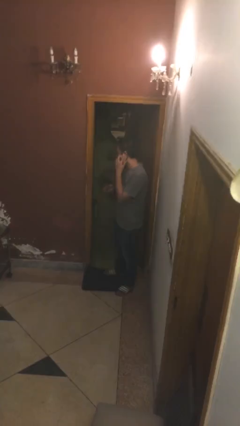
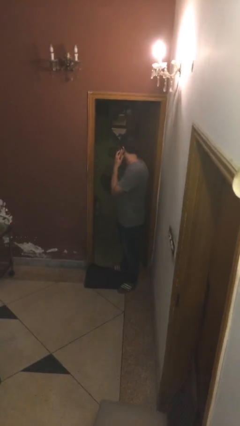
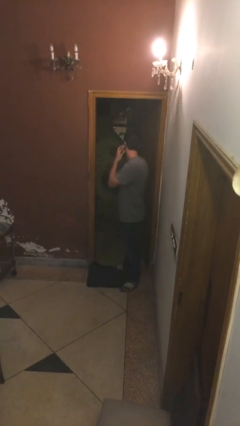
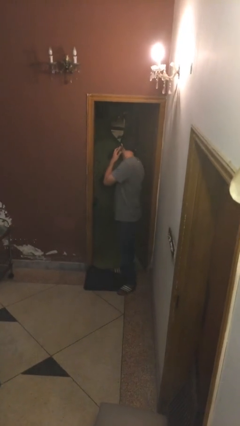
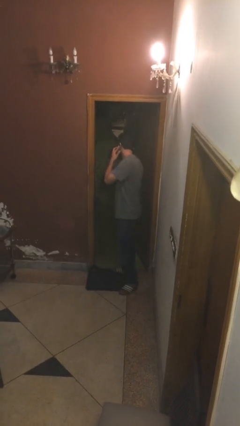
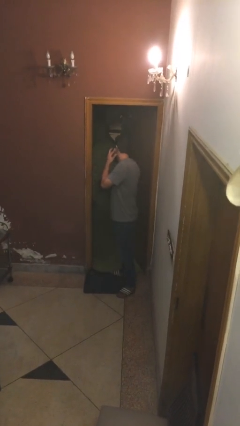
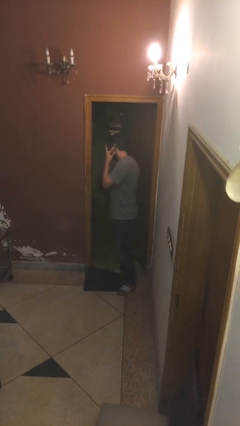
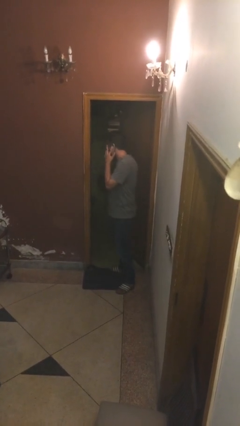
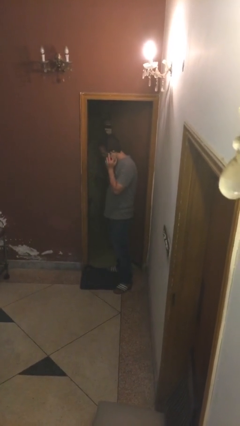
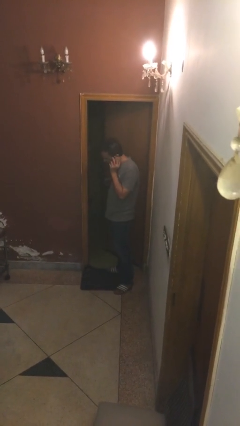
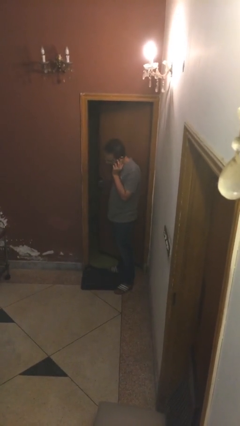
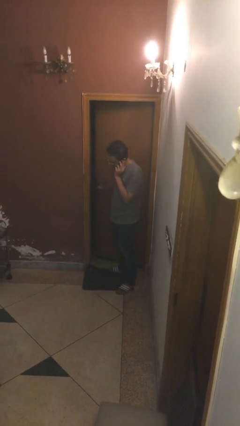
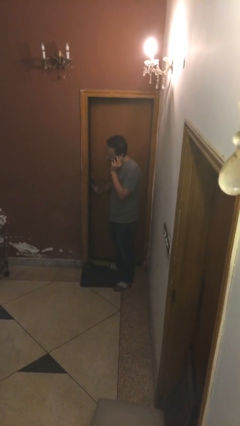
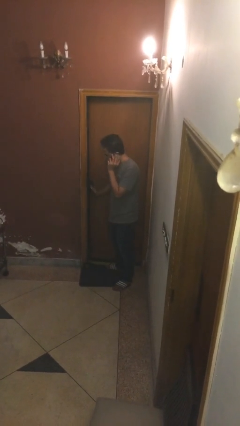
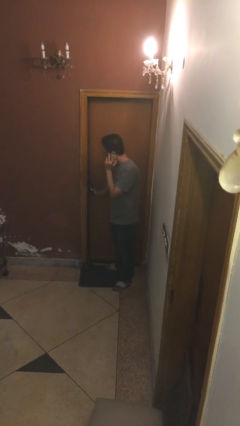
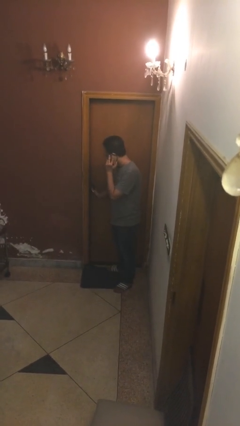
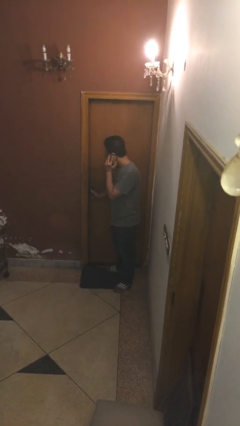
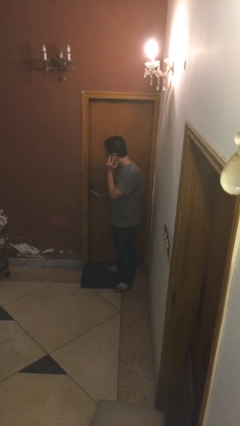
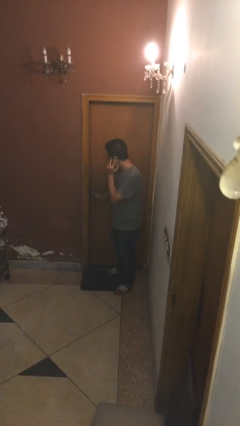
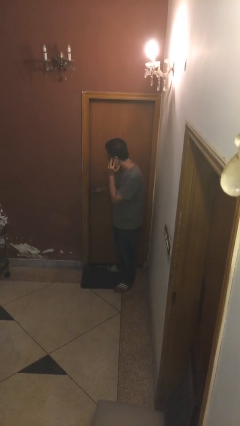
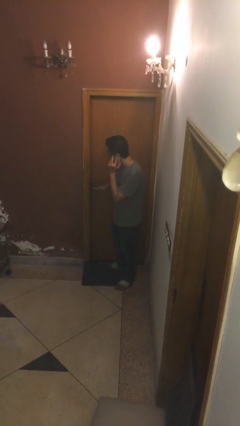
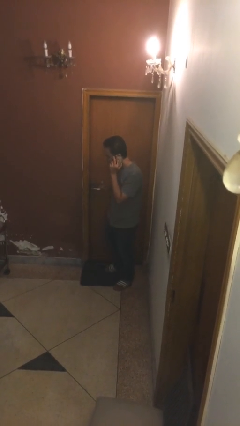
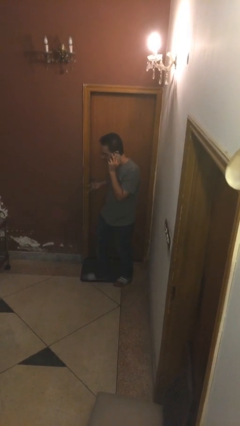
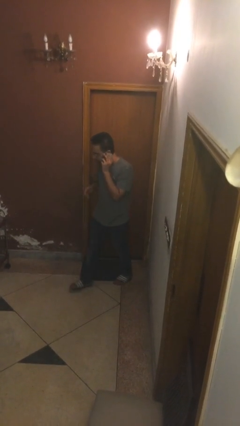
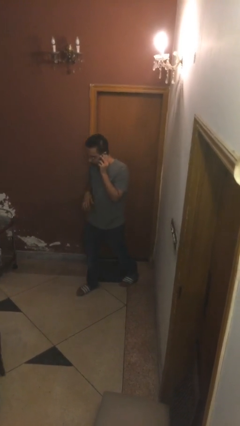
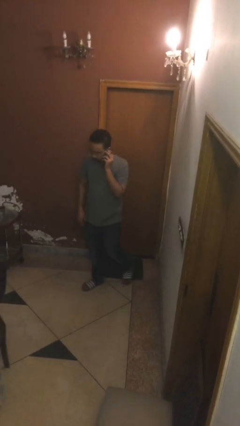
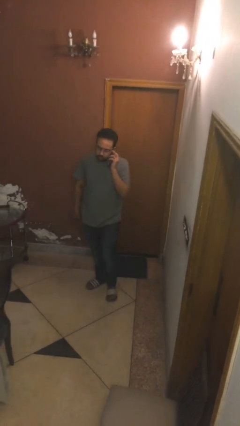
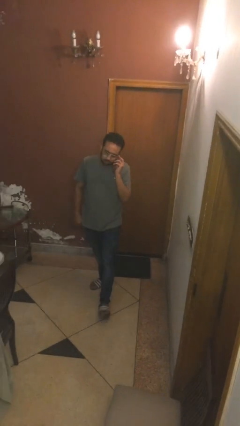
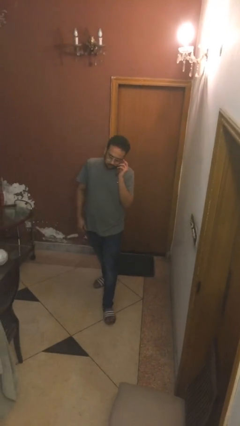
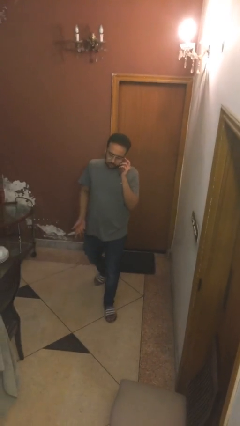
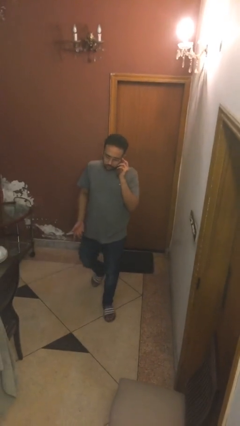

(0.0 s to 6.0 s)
person closes facility door

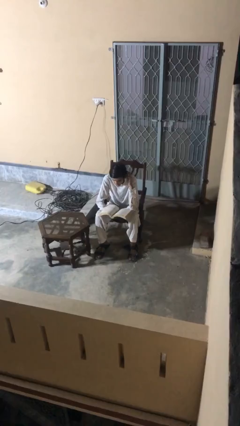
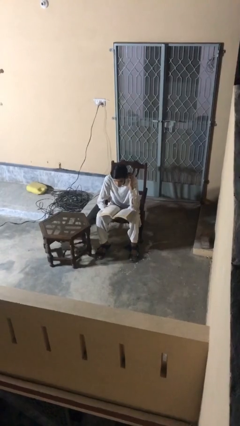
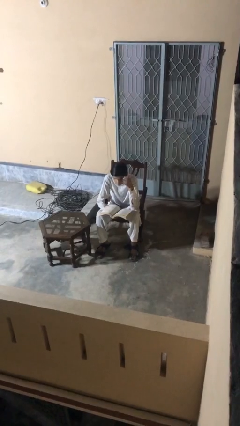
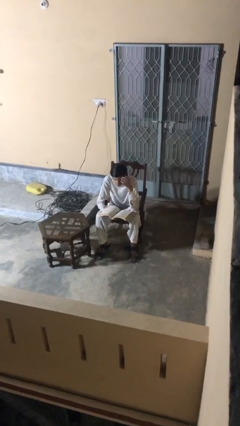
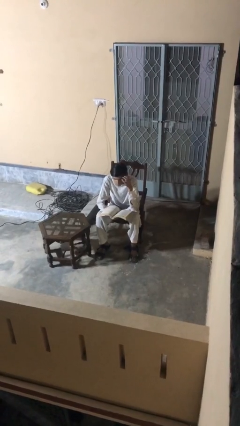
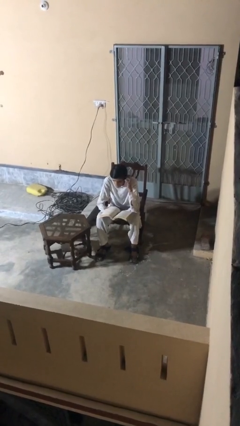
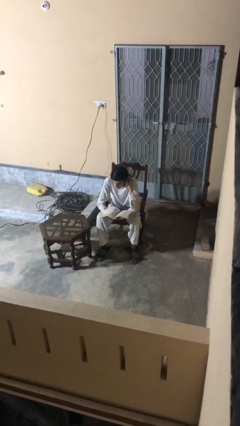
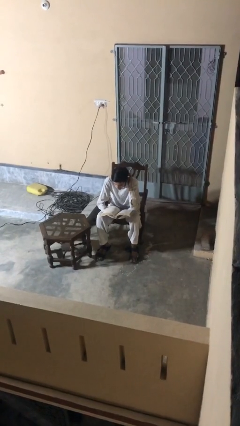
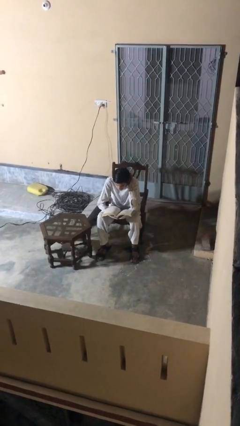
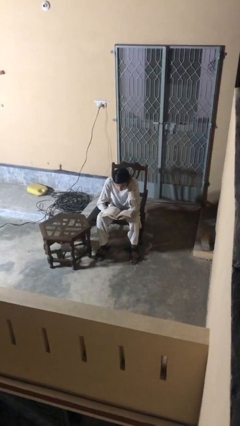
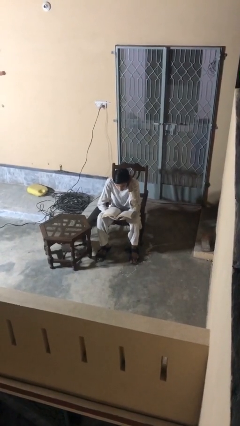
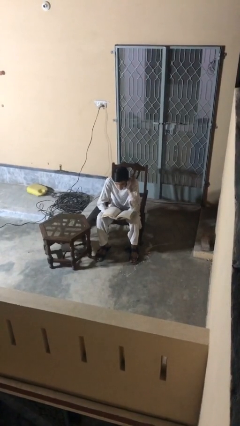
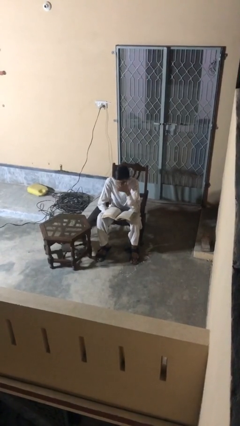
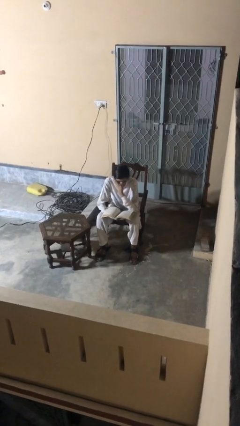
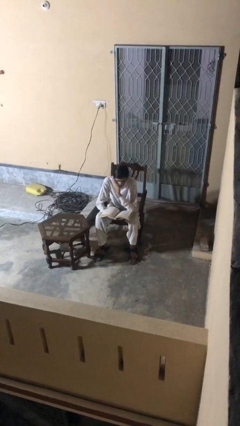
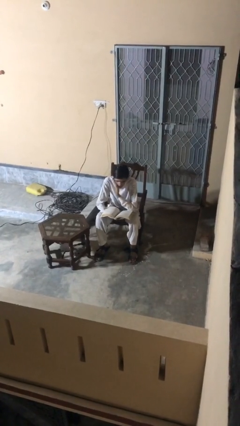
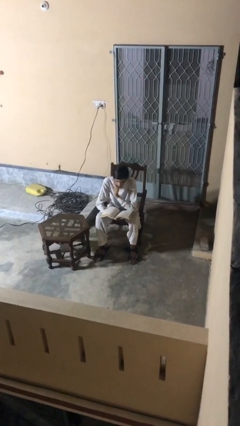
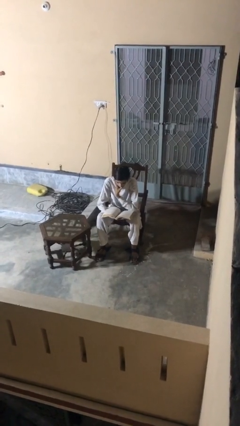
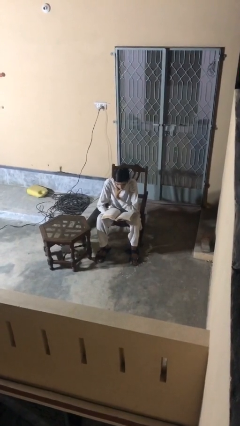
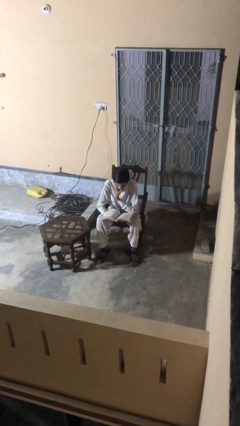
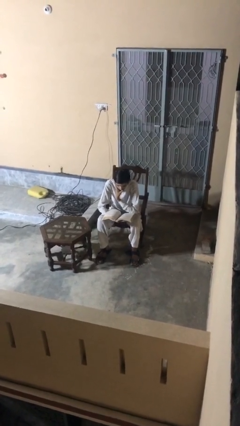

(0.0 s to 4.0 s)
person reads document

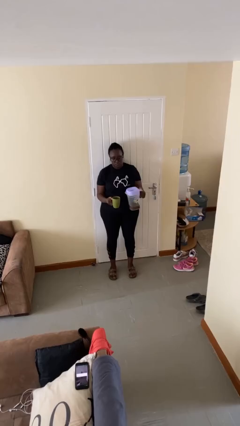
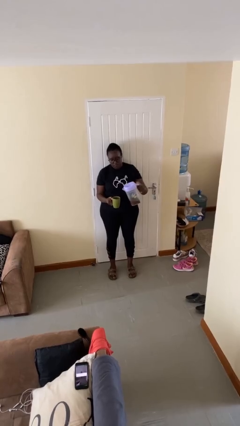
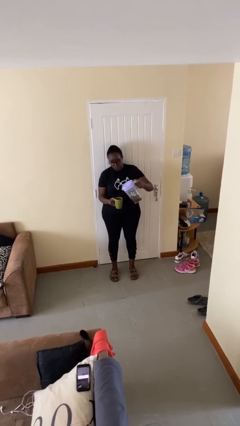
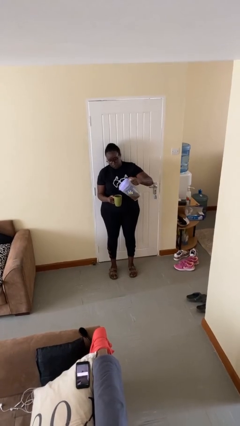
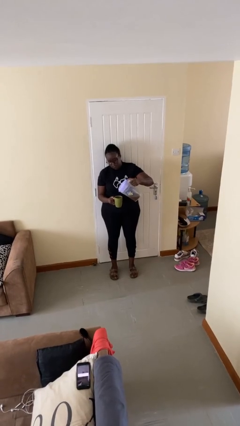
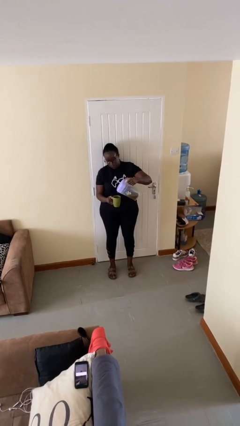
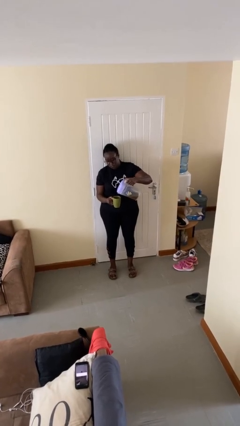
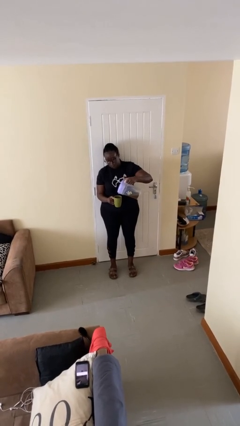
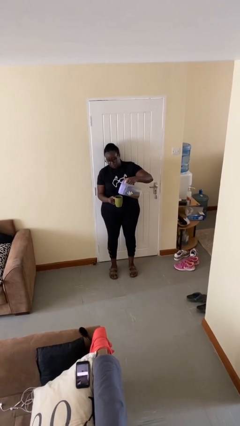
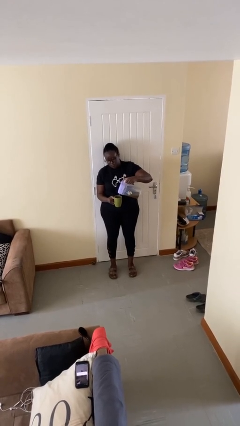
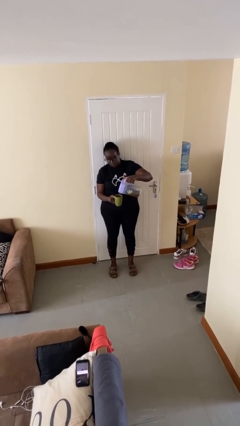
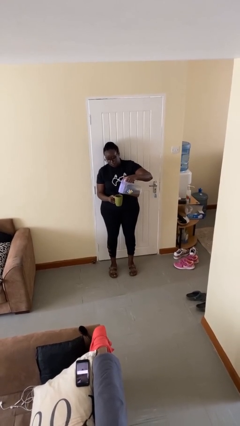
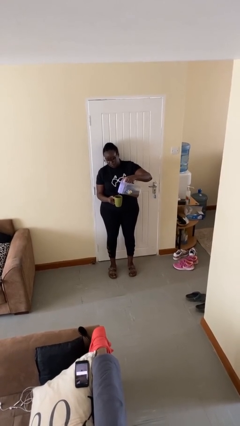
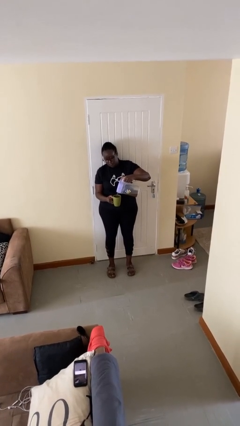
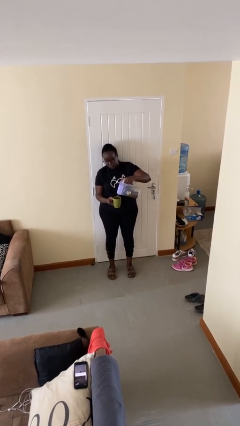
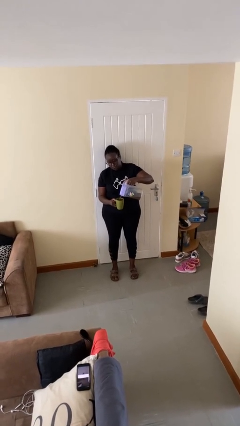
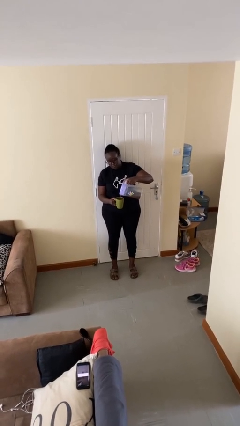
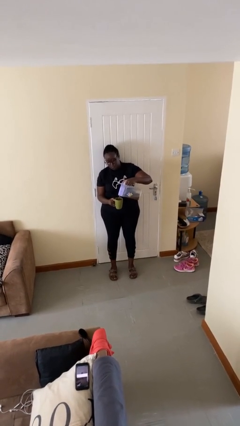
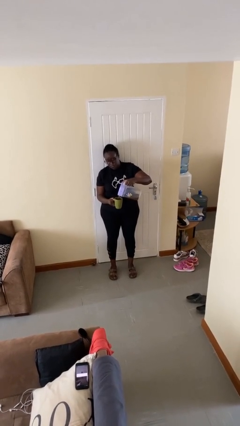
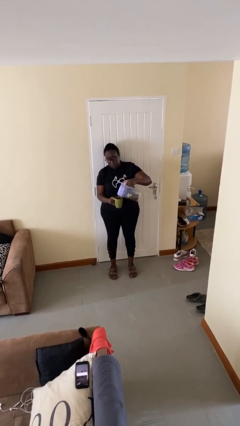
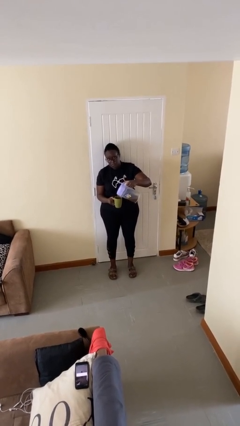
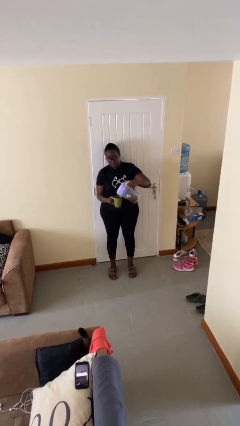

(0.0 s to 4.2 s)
person pours coffee into mug

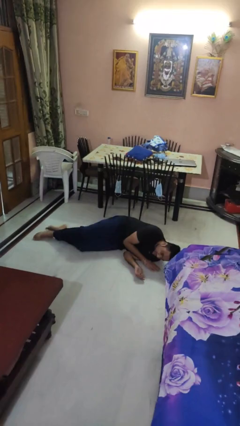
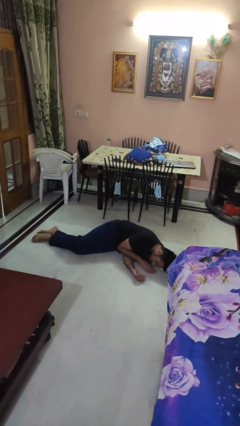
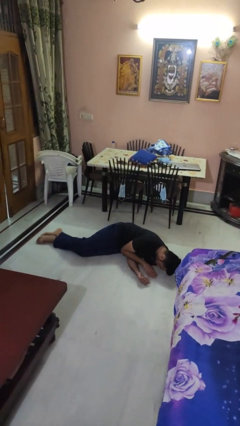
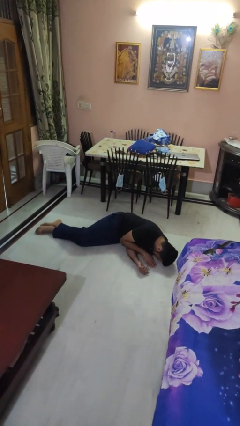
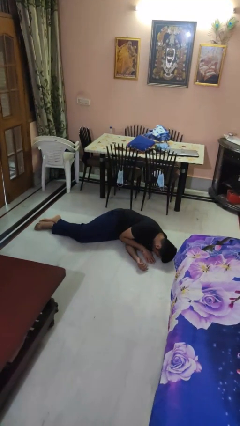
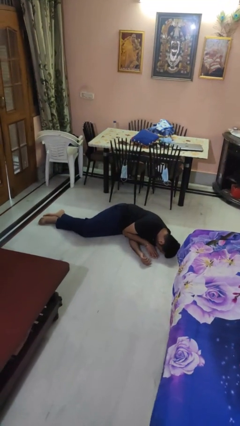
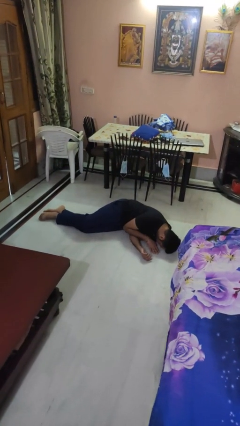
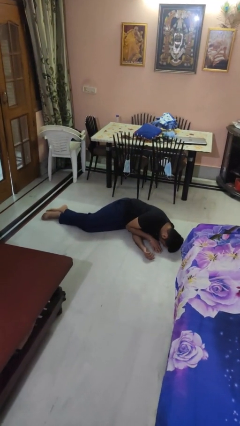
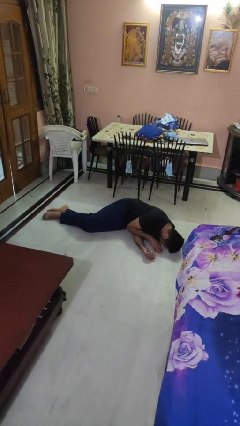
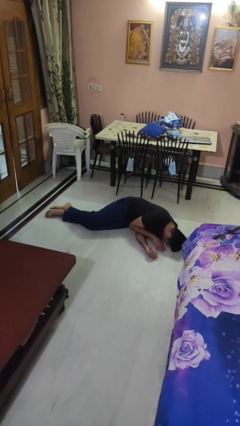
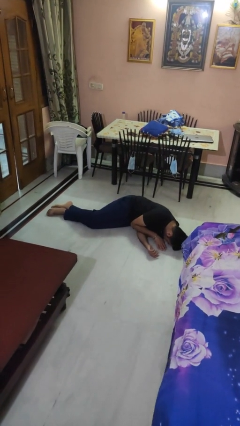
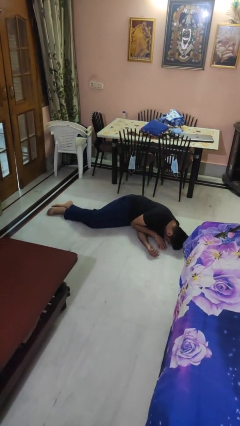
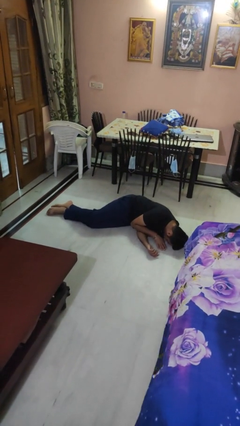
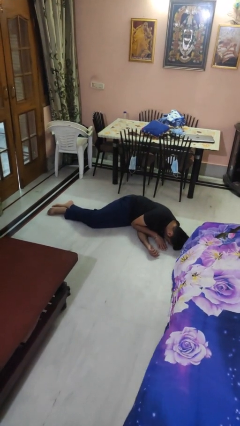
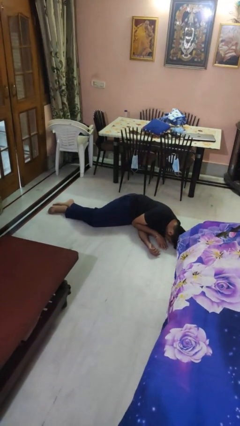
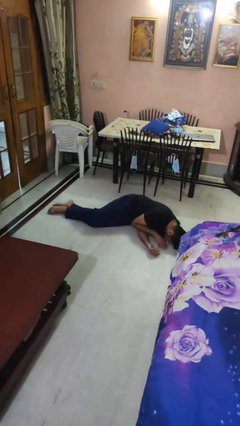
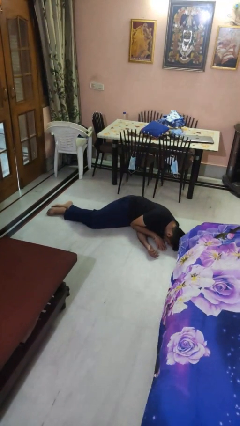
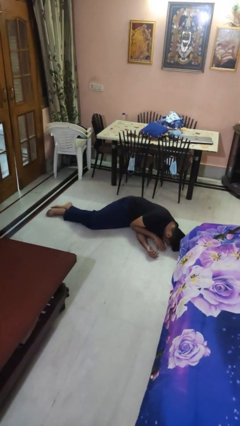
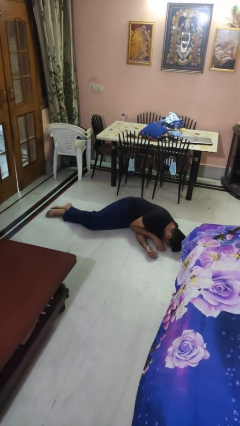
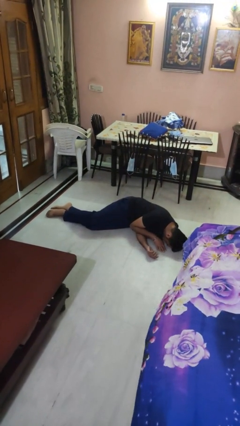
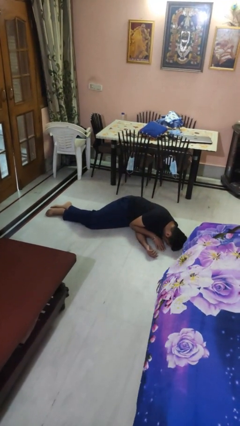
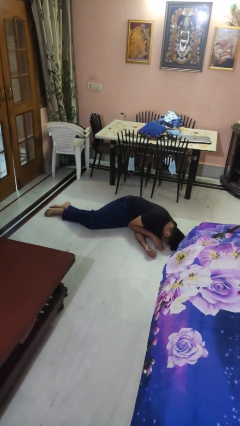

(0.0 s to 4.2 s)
person lies down on floor
